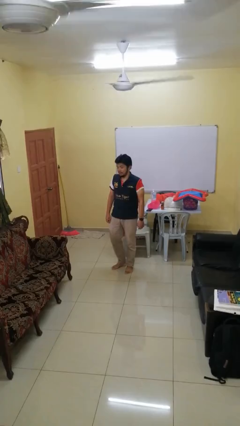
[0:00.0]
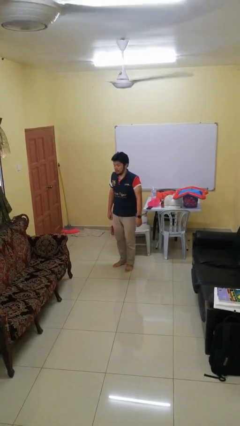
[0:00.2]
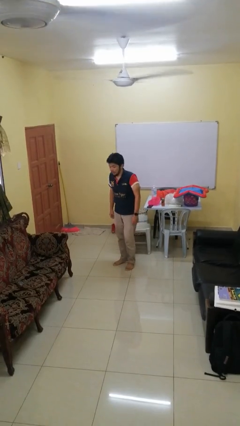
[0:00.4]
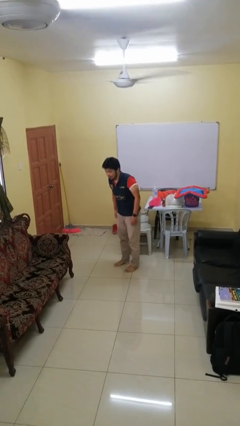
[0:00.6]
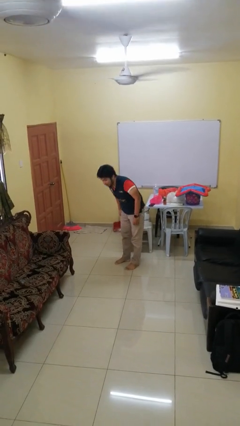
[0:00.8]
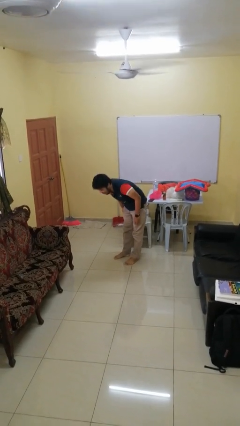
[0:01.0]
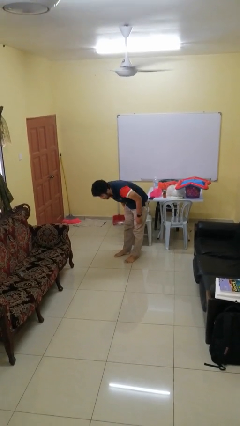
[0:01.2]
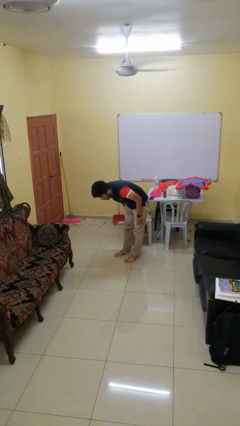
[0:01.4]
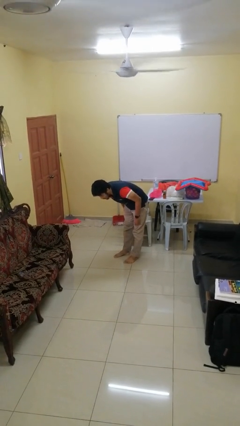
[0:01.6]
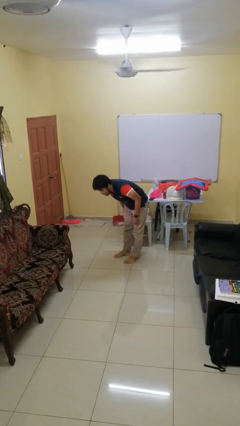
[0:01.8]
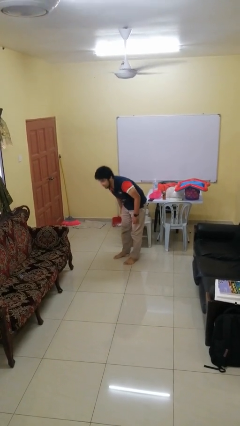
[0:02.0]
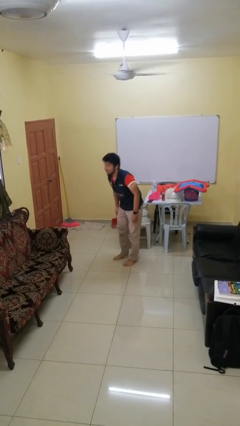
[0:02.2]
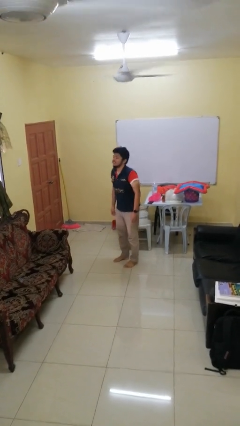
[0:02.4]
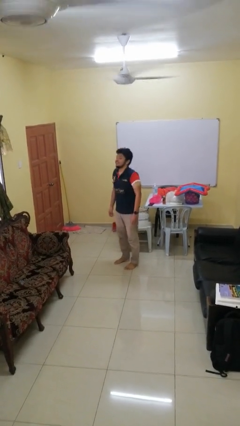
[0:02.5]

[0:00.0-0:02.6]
person bows

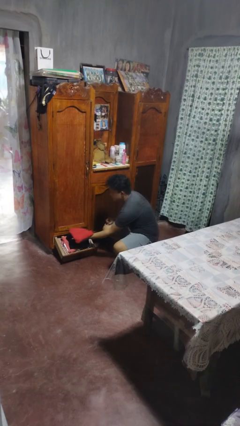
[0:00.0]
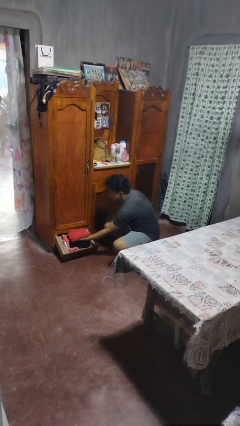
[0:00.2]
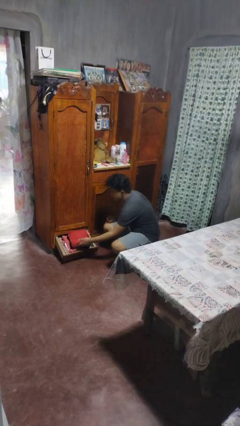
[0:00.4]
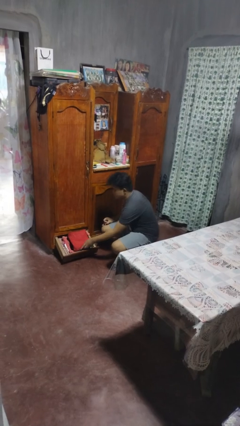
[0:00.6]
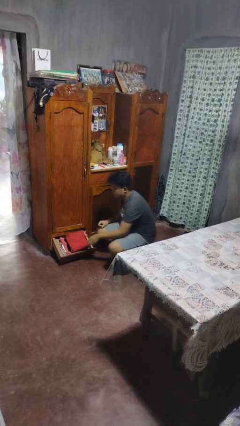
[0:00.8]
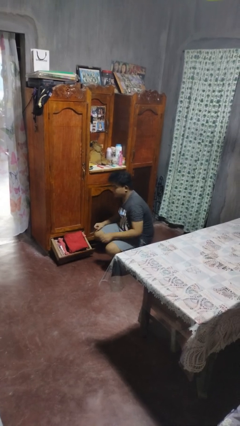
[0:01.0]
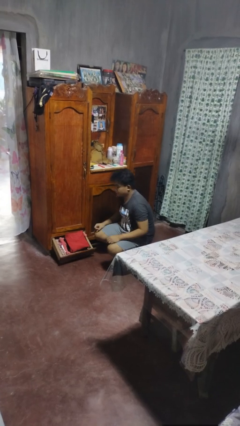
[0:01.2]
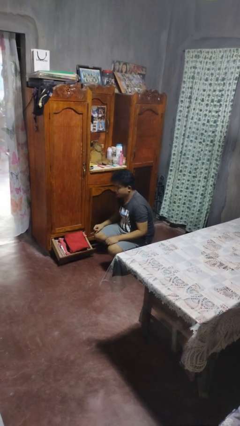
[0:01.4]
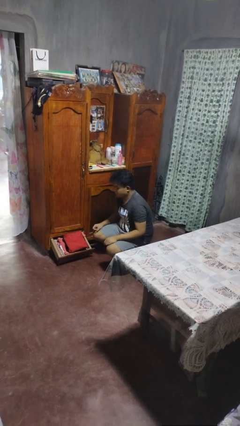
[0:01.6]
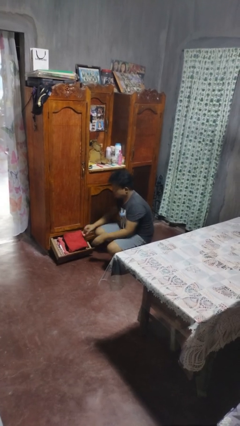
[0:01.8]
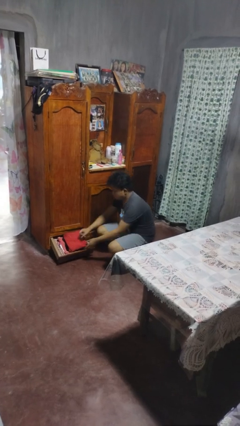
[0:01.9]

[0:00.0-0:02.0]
person puts clothes into dresser

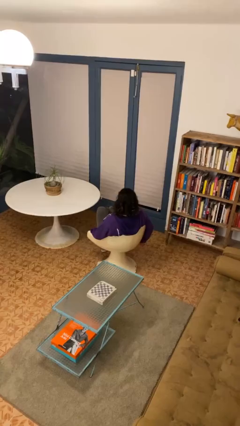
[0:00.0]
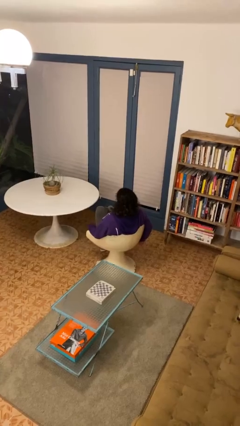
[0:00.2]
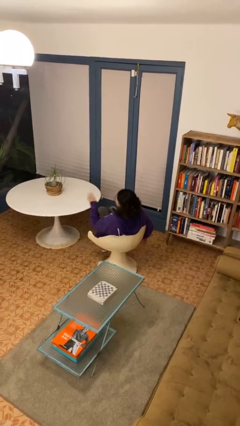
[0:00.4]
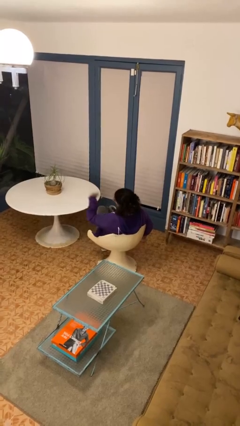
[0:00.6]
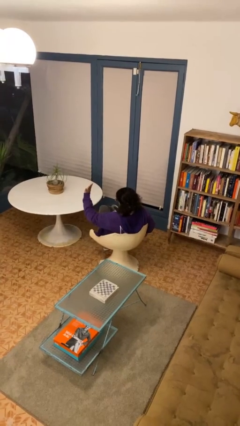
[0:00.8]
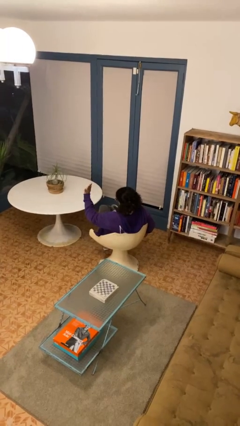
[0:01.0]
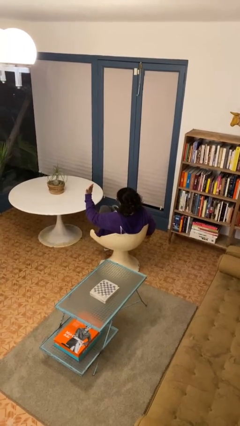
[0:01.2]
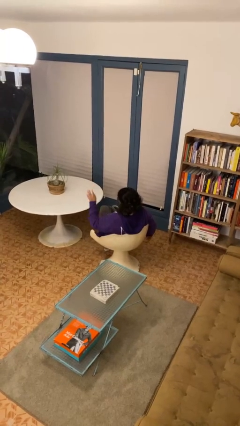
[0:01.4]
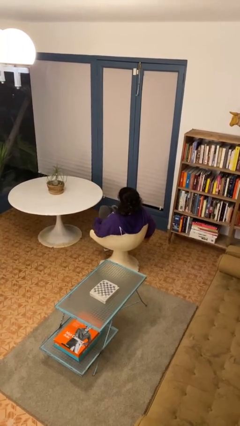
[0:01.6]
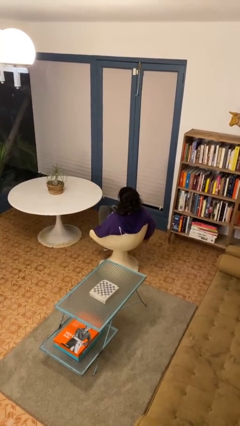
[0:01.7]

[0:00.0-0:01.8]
person gestures stop

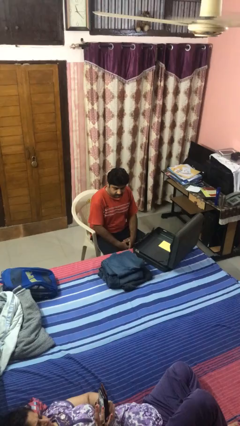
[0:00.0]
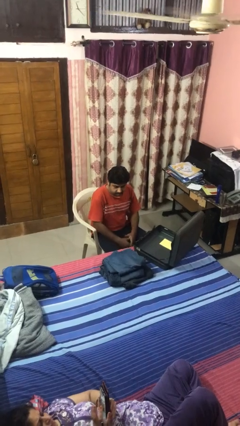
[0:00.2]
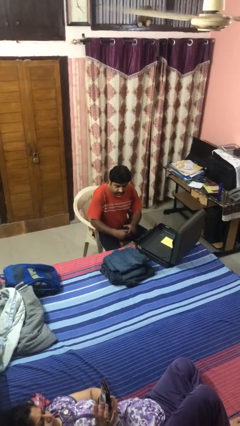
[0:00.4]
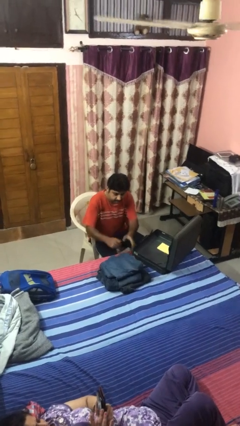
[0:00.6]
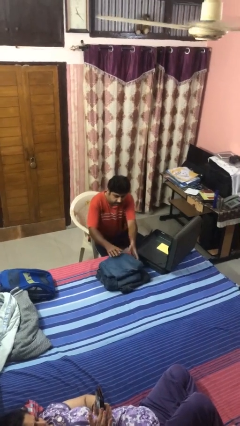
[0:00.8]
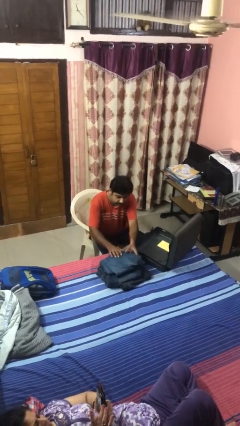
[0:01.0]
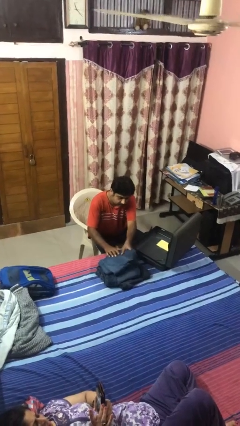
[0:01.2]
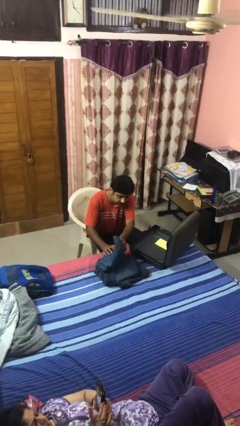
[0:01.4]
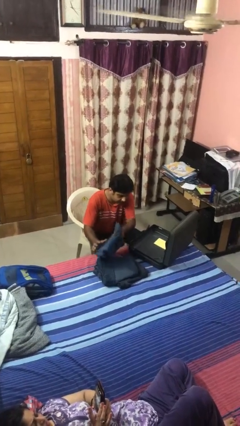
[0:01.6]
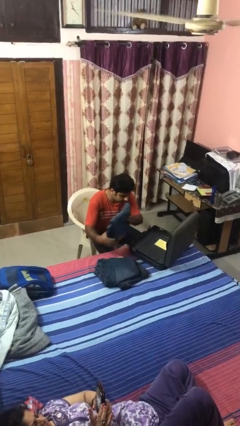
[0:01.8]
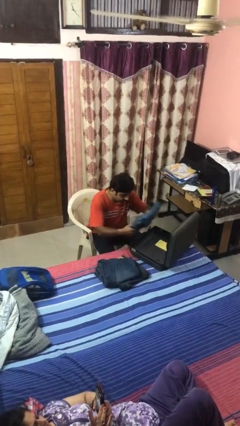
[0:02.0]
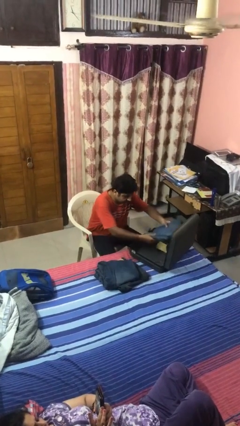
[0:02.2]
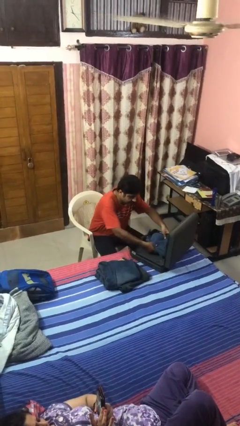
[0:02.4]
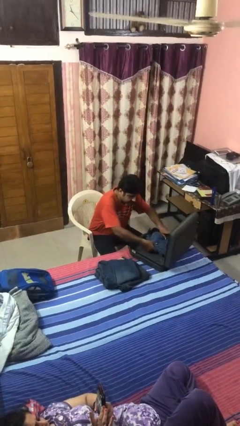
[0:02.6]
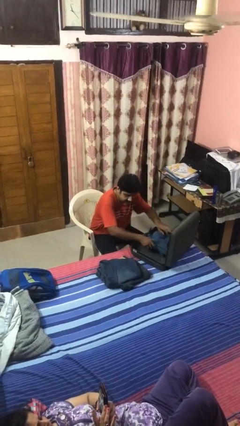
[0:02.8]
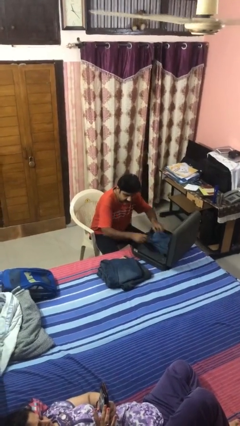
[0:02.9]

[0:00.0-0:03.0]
person loads clothes into suitcase

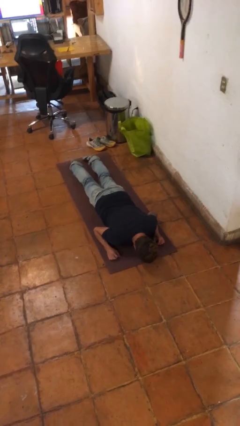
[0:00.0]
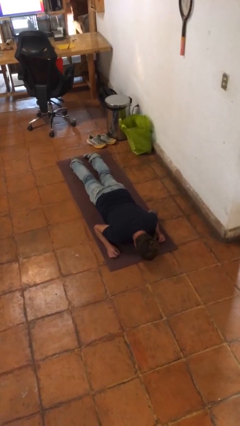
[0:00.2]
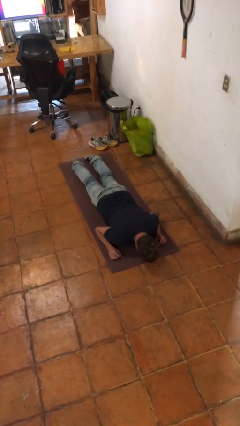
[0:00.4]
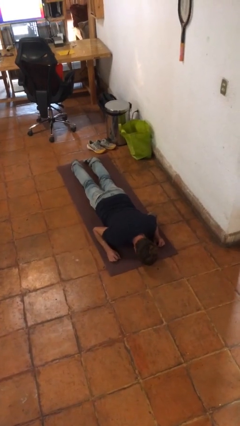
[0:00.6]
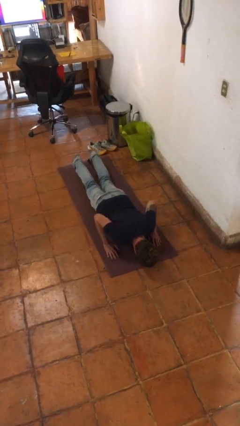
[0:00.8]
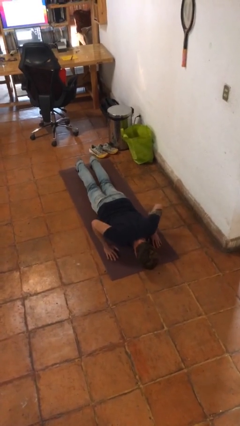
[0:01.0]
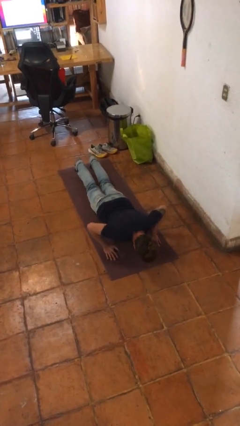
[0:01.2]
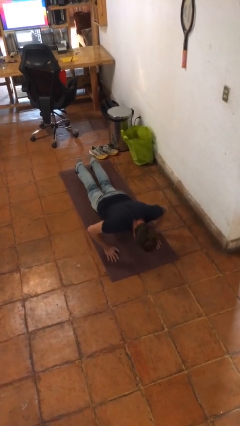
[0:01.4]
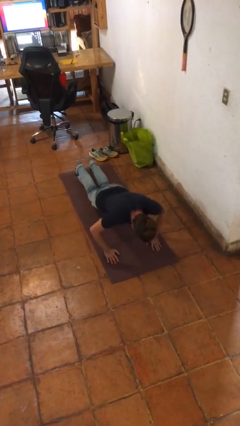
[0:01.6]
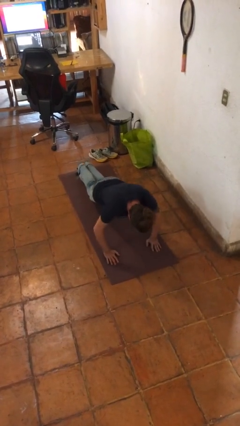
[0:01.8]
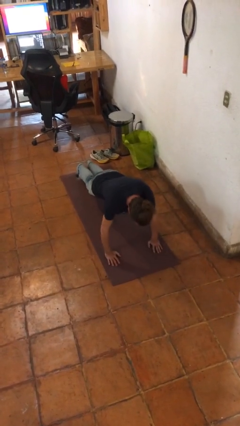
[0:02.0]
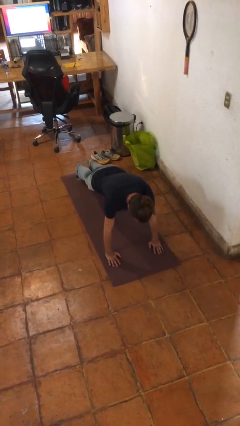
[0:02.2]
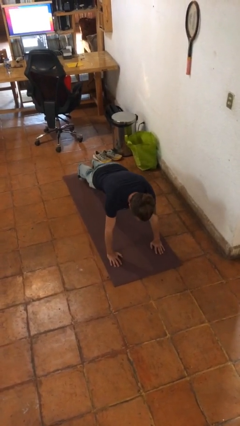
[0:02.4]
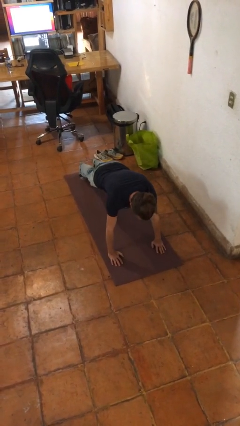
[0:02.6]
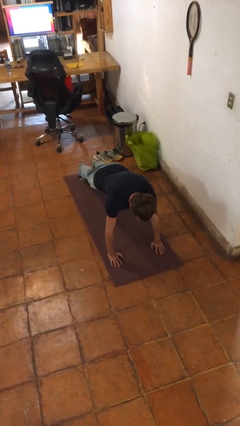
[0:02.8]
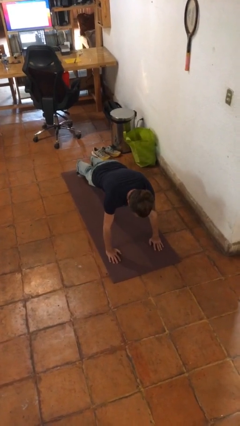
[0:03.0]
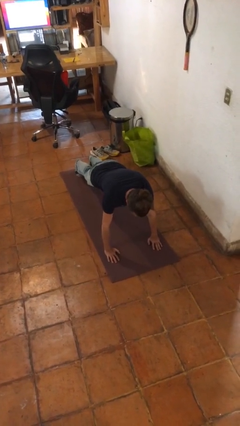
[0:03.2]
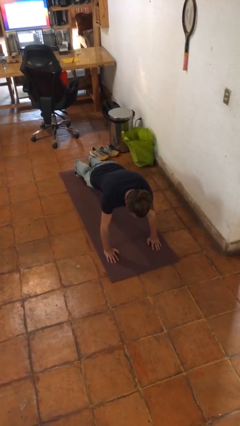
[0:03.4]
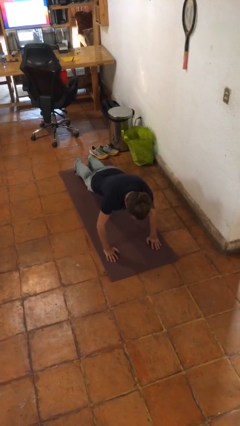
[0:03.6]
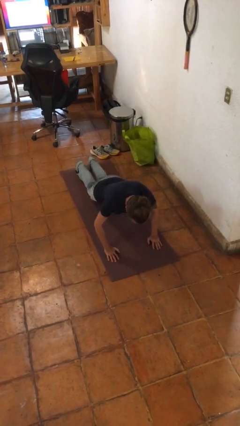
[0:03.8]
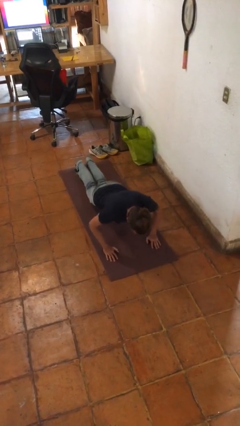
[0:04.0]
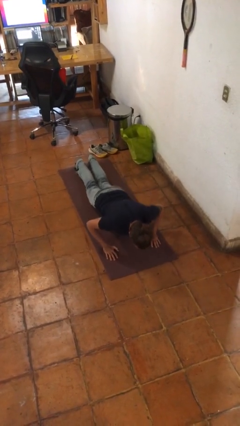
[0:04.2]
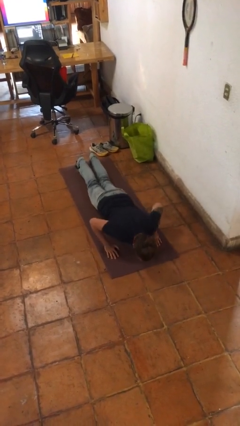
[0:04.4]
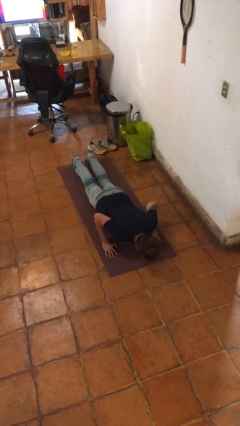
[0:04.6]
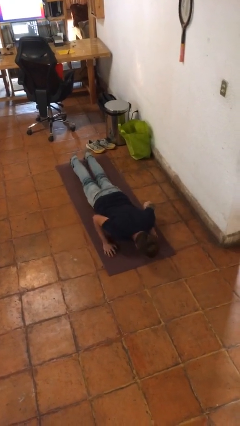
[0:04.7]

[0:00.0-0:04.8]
person exercises with pushup

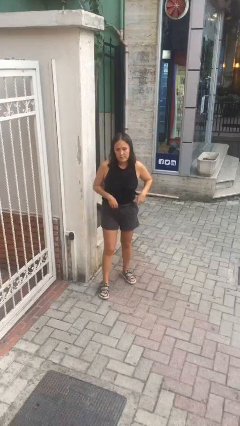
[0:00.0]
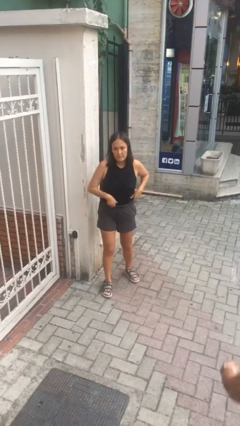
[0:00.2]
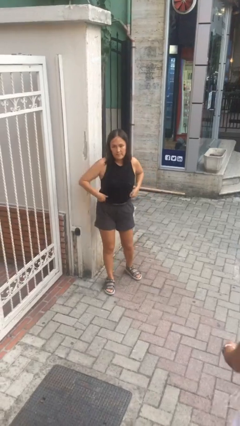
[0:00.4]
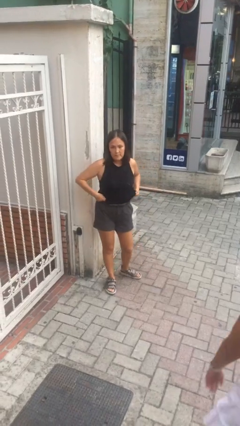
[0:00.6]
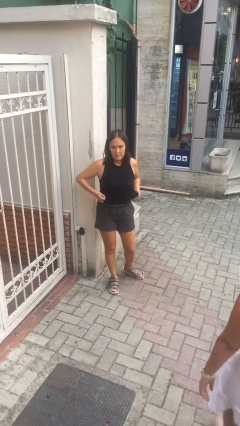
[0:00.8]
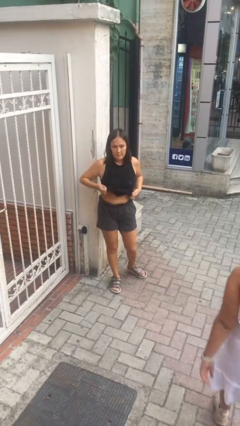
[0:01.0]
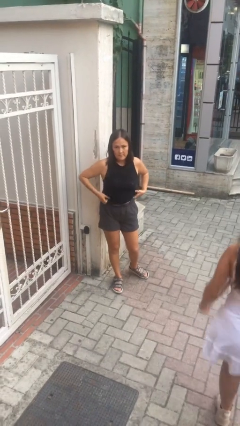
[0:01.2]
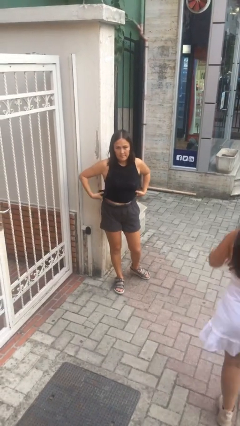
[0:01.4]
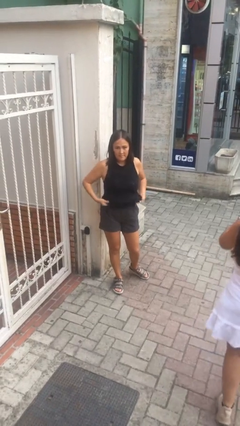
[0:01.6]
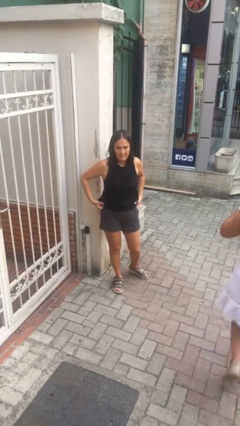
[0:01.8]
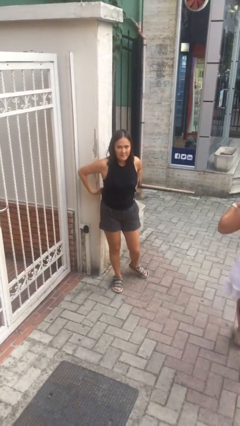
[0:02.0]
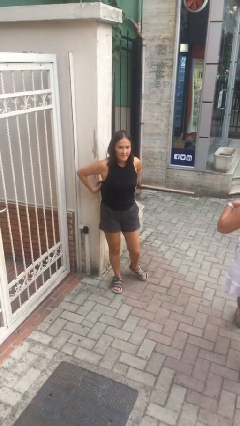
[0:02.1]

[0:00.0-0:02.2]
person untucks shirt

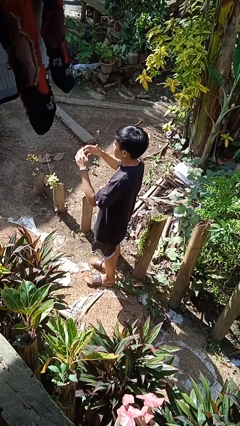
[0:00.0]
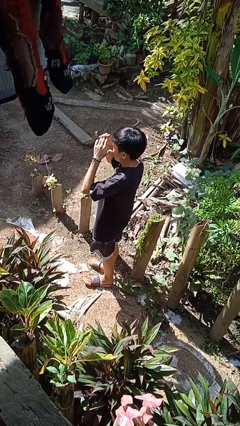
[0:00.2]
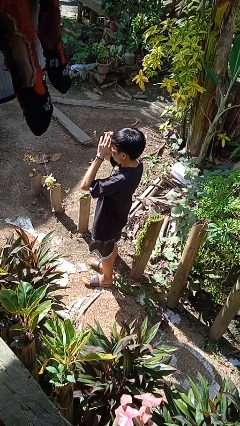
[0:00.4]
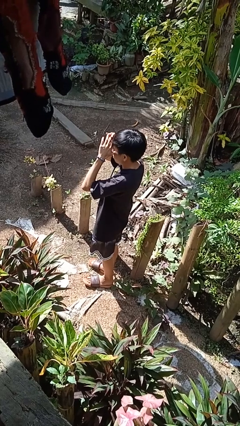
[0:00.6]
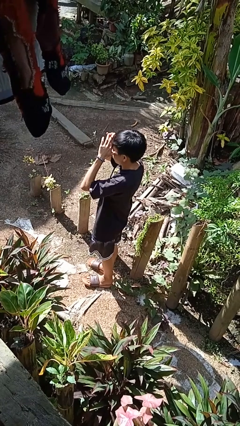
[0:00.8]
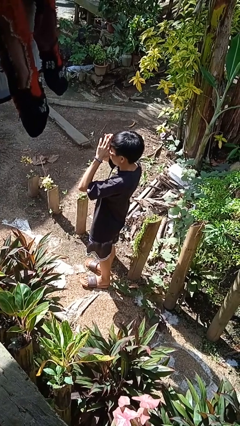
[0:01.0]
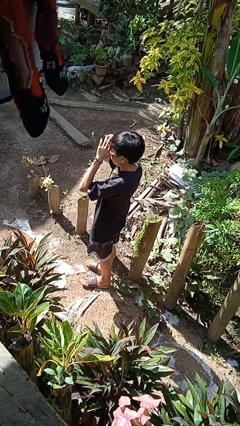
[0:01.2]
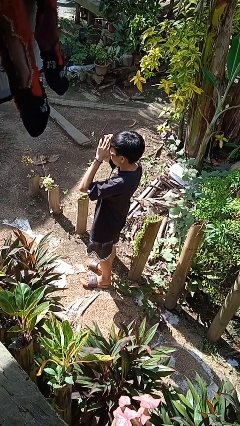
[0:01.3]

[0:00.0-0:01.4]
person shades eyes
